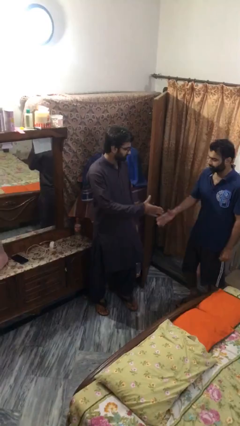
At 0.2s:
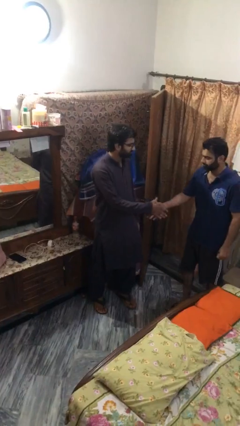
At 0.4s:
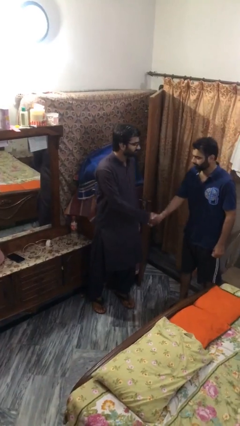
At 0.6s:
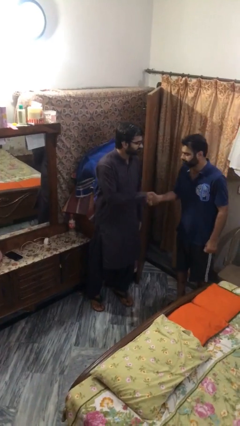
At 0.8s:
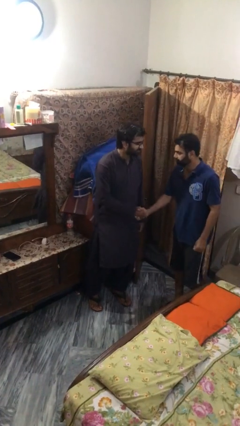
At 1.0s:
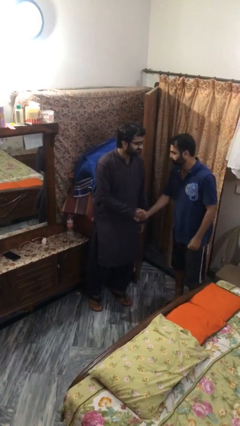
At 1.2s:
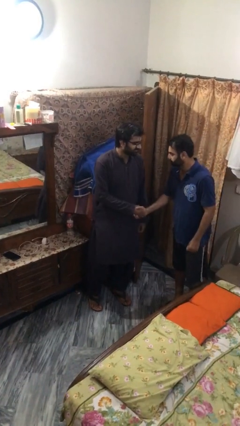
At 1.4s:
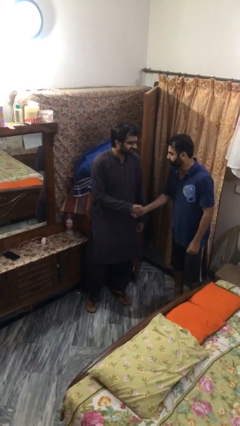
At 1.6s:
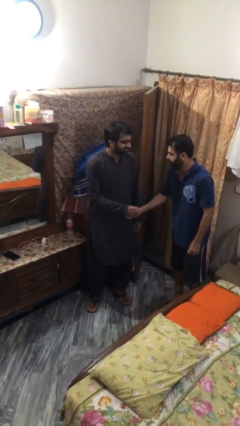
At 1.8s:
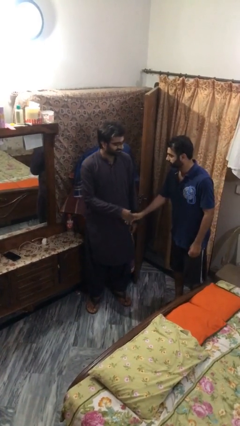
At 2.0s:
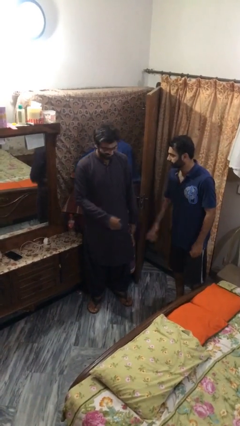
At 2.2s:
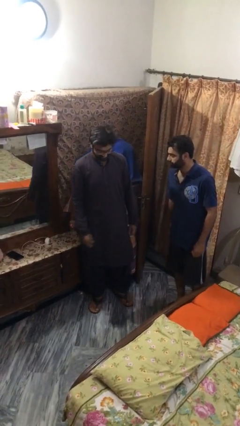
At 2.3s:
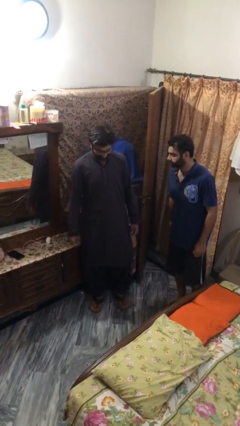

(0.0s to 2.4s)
person shakes hand

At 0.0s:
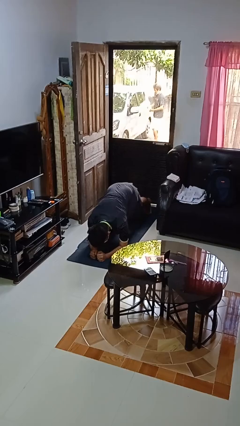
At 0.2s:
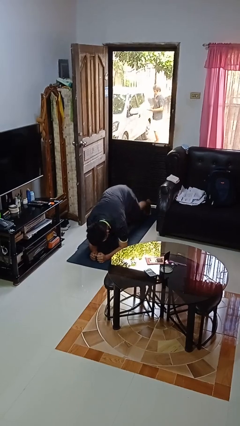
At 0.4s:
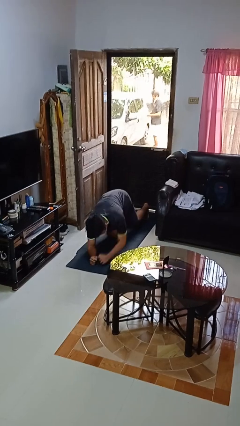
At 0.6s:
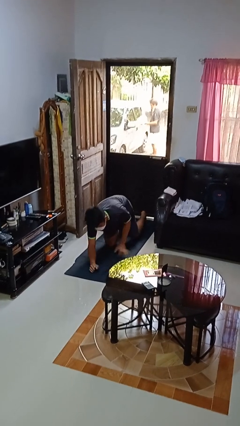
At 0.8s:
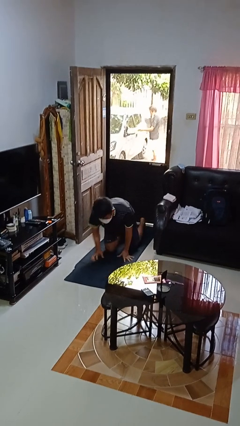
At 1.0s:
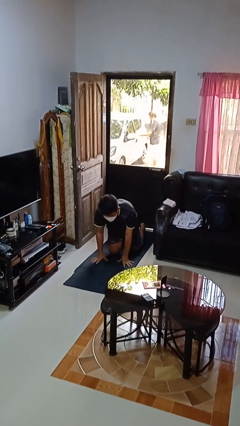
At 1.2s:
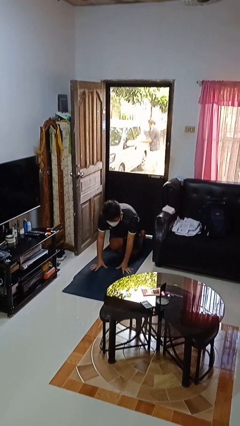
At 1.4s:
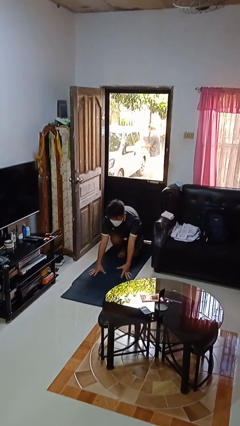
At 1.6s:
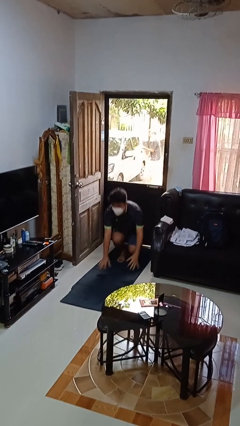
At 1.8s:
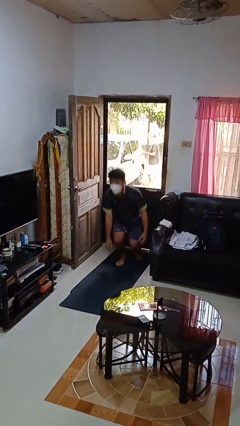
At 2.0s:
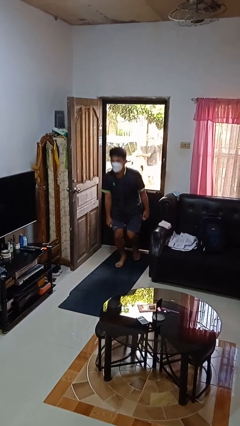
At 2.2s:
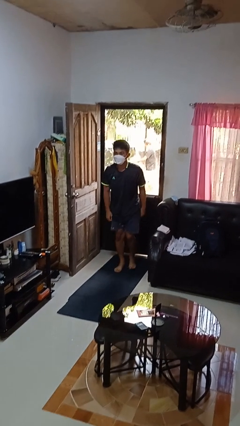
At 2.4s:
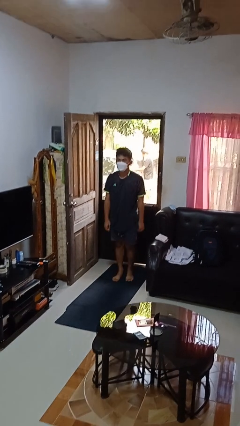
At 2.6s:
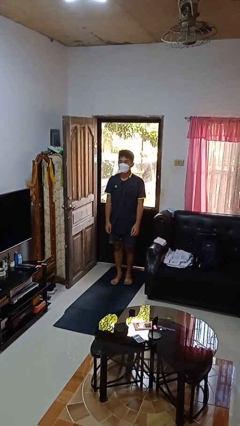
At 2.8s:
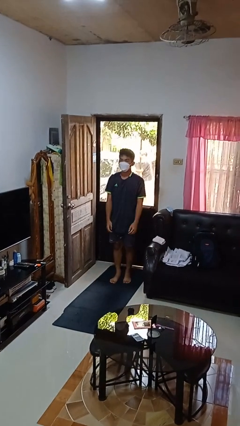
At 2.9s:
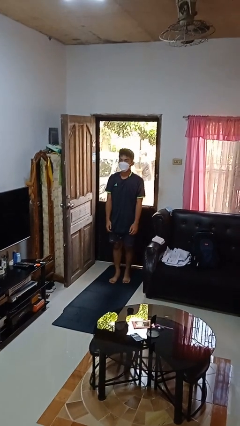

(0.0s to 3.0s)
person stands up from floor

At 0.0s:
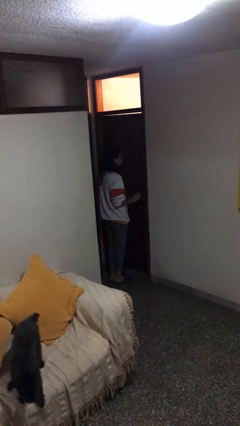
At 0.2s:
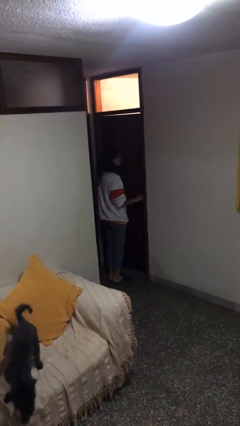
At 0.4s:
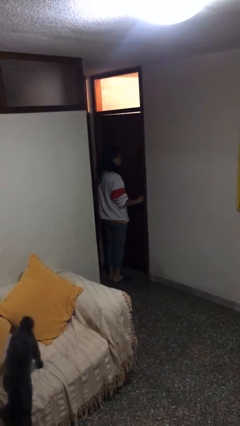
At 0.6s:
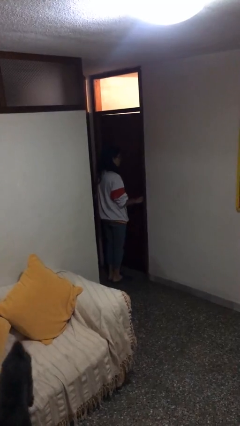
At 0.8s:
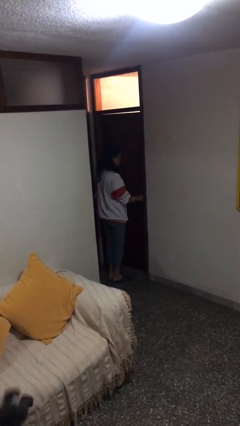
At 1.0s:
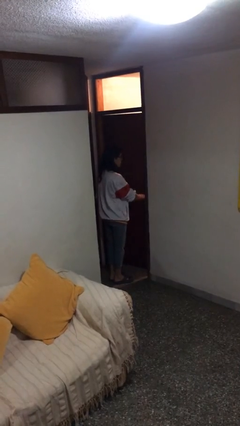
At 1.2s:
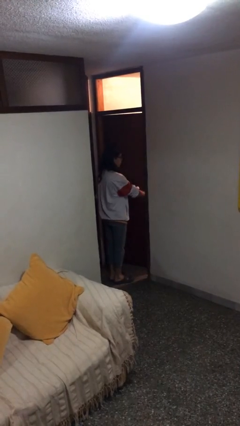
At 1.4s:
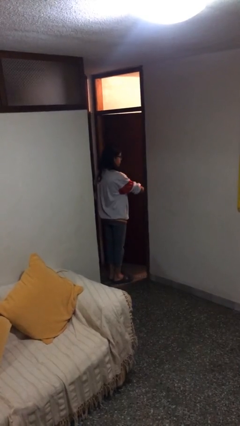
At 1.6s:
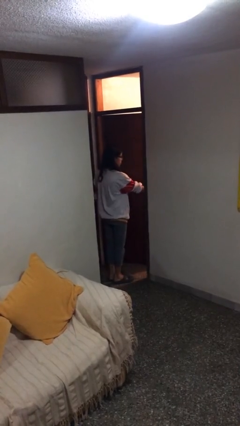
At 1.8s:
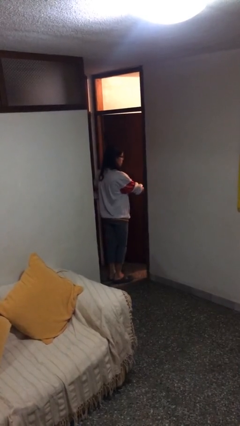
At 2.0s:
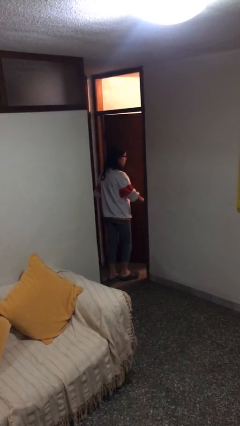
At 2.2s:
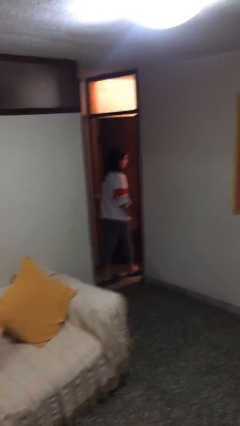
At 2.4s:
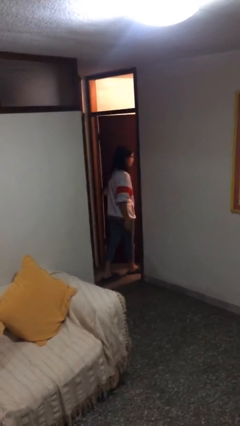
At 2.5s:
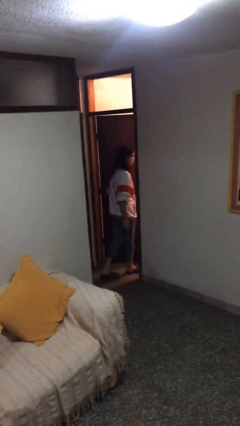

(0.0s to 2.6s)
person opens facility door

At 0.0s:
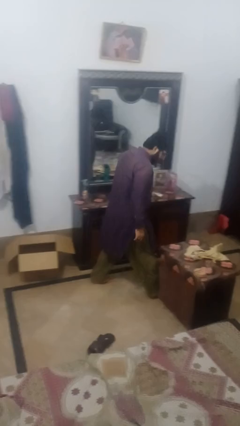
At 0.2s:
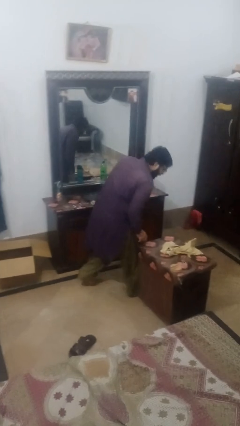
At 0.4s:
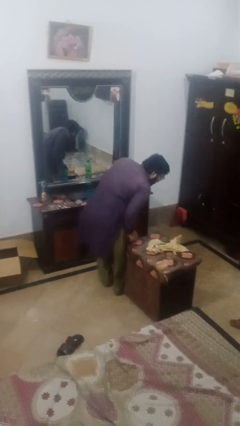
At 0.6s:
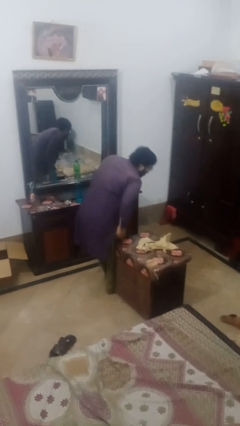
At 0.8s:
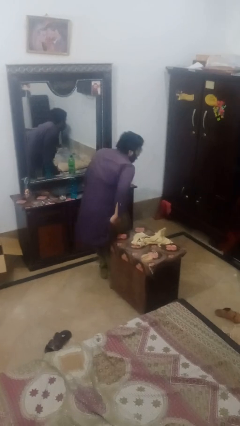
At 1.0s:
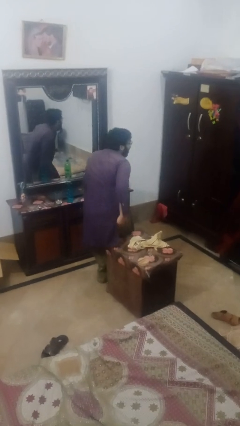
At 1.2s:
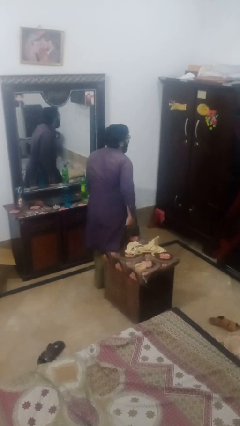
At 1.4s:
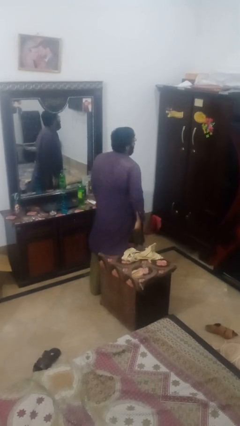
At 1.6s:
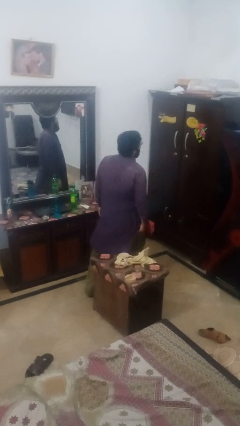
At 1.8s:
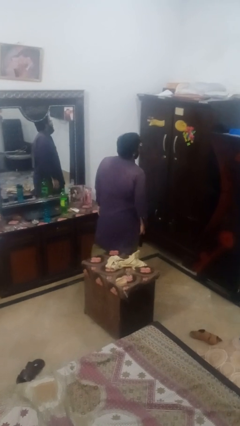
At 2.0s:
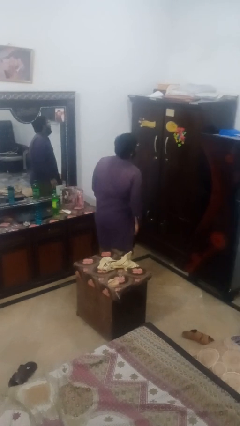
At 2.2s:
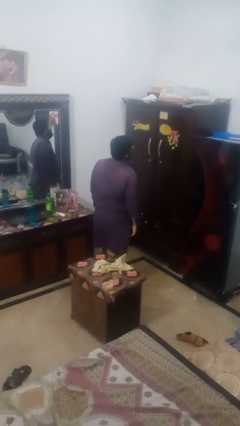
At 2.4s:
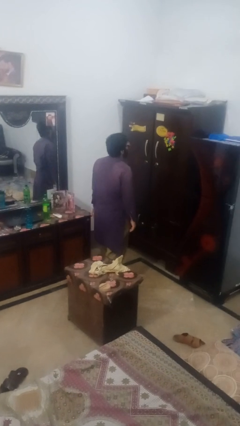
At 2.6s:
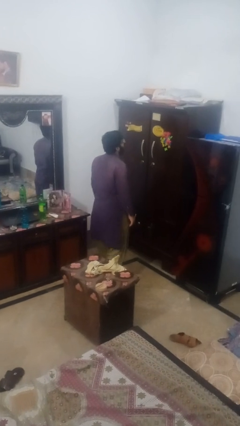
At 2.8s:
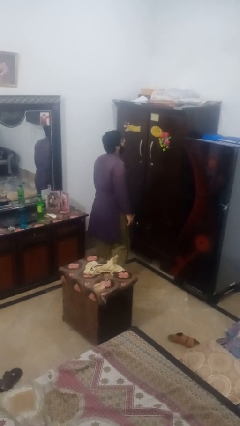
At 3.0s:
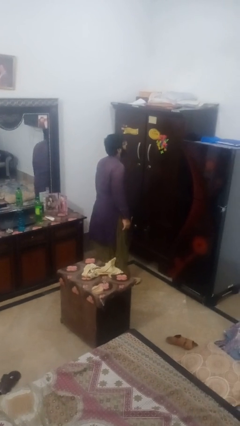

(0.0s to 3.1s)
person bumps into table

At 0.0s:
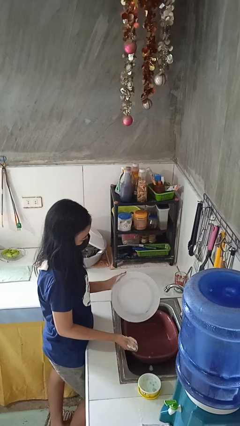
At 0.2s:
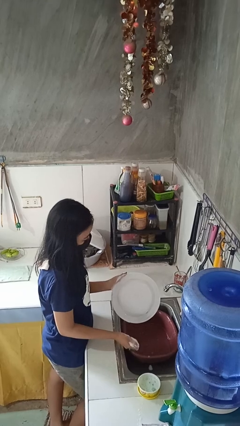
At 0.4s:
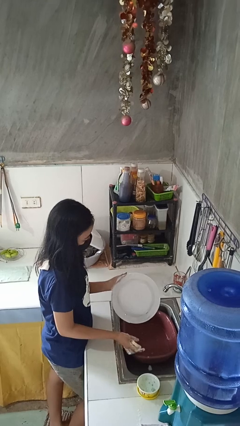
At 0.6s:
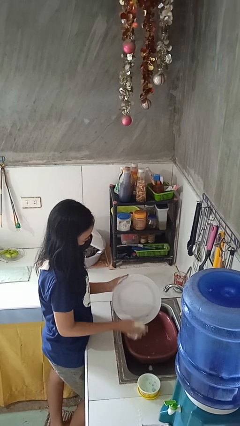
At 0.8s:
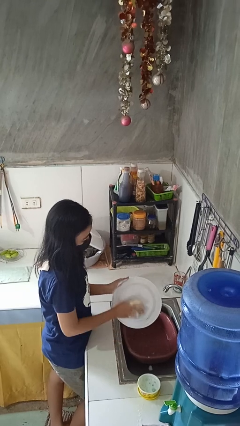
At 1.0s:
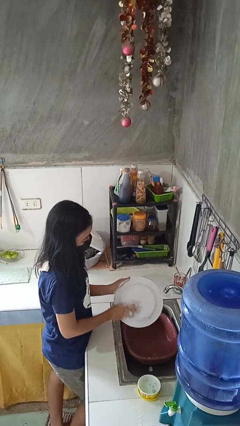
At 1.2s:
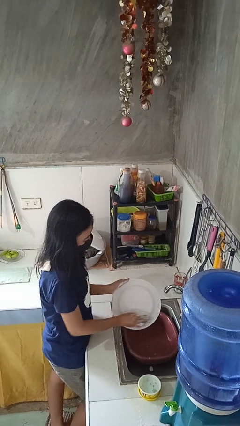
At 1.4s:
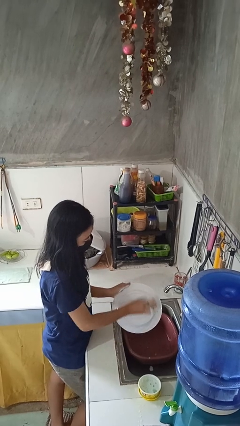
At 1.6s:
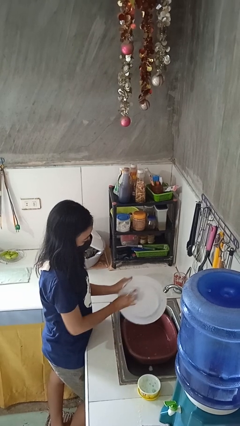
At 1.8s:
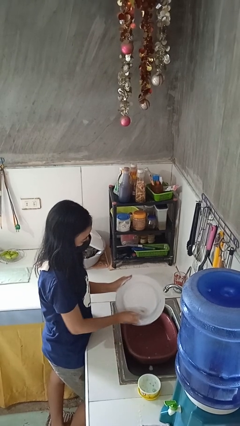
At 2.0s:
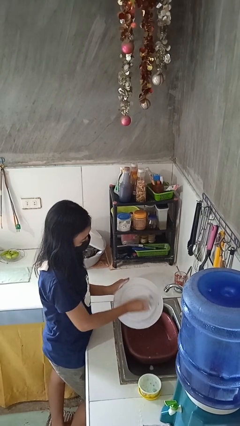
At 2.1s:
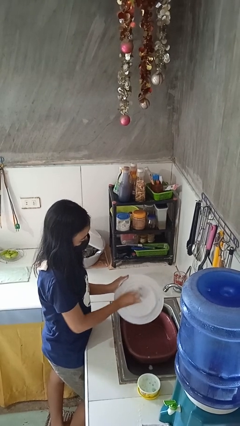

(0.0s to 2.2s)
person washes dish

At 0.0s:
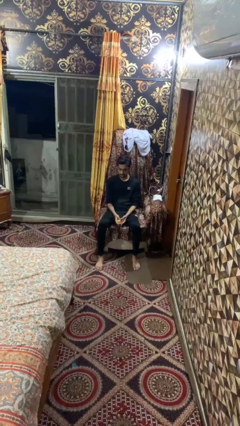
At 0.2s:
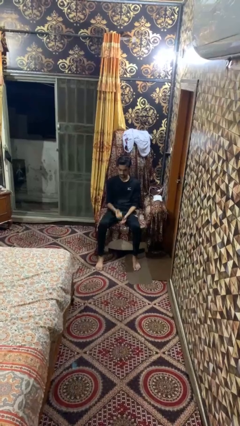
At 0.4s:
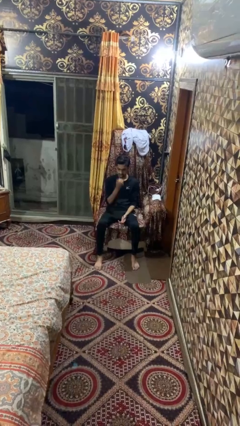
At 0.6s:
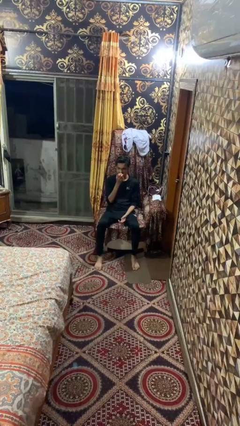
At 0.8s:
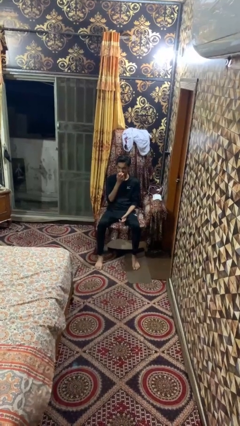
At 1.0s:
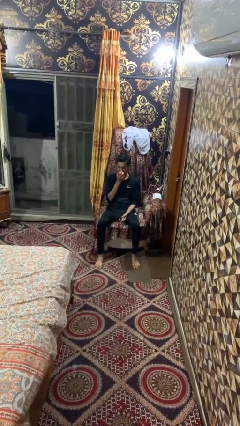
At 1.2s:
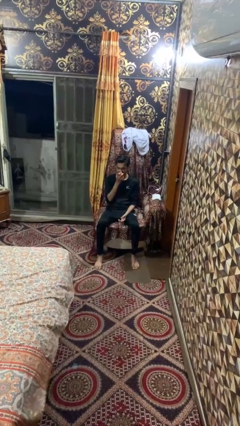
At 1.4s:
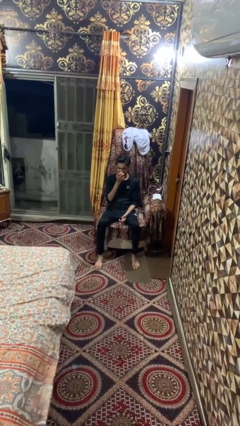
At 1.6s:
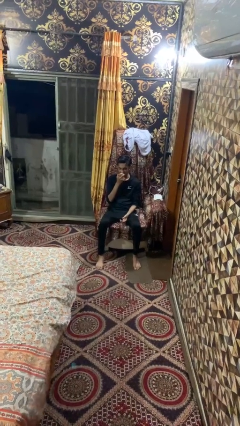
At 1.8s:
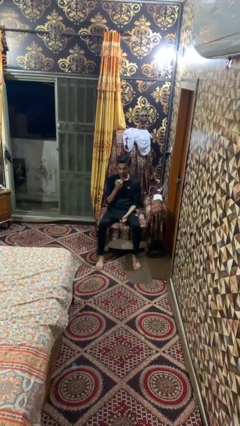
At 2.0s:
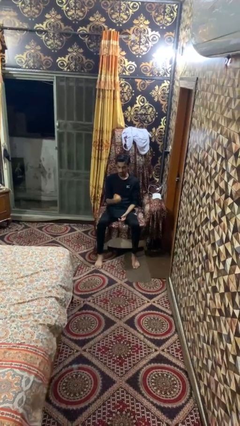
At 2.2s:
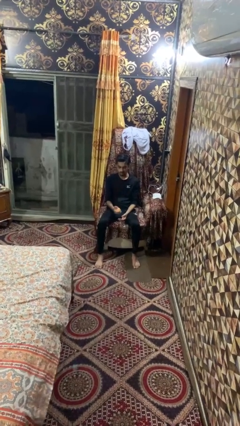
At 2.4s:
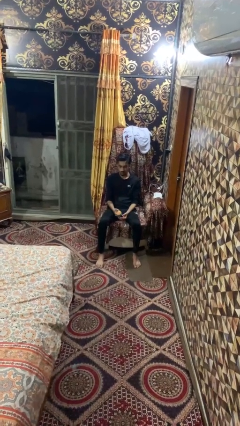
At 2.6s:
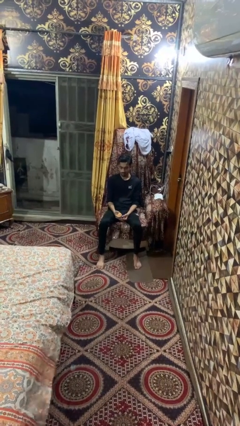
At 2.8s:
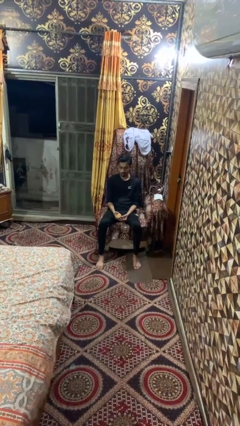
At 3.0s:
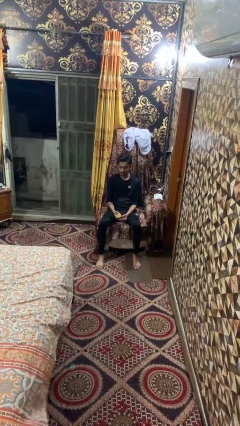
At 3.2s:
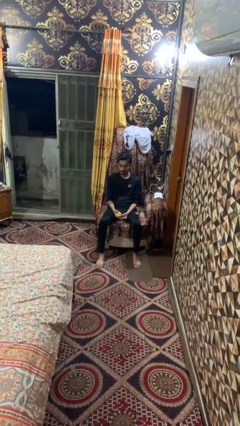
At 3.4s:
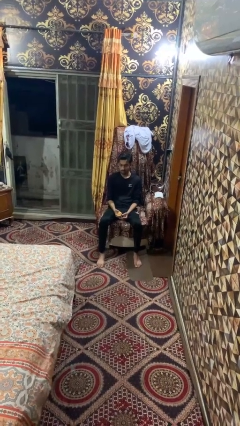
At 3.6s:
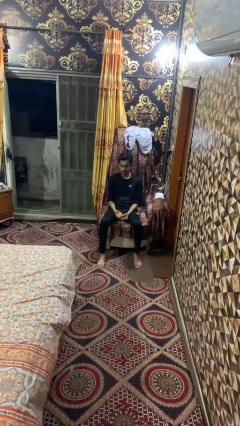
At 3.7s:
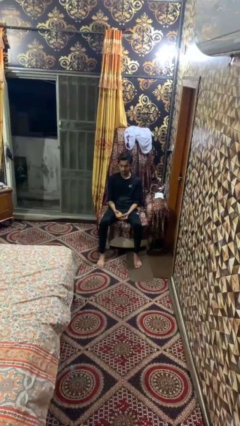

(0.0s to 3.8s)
person eats apple

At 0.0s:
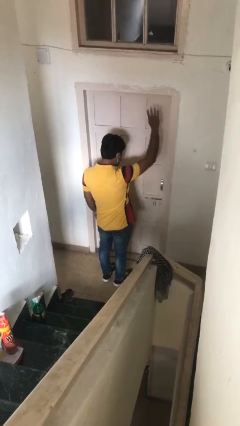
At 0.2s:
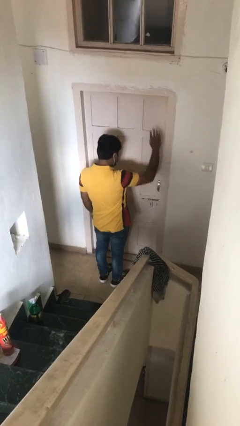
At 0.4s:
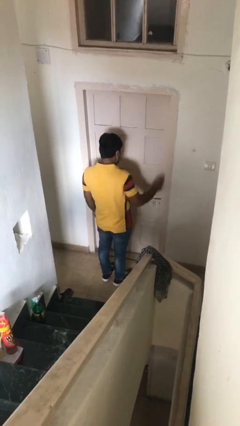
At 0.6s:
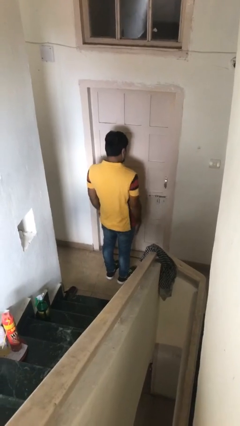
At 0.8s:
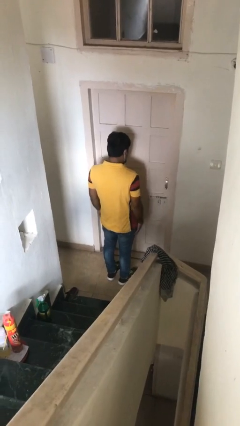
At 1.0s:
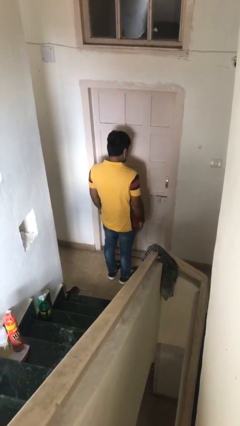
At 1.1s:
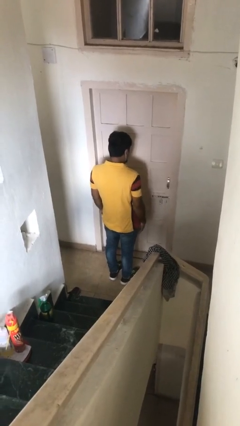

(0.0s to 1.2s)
person gestures lower hand
